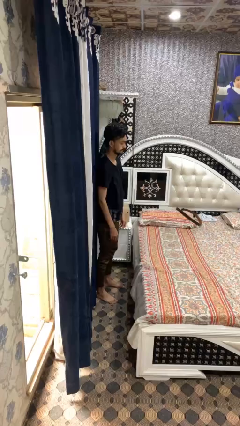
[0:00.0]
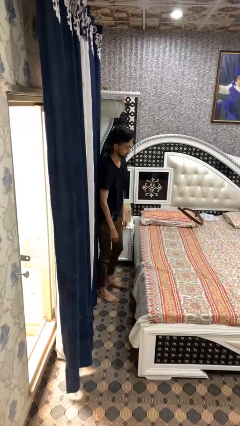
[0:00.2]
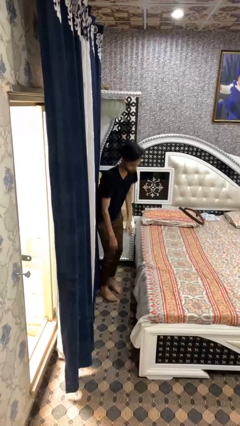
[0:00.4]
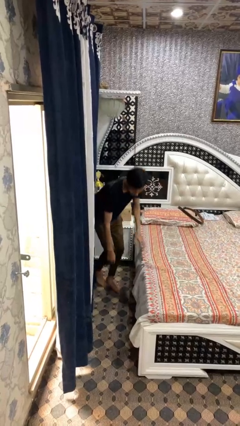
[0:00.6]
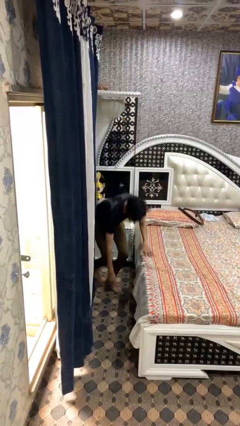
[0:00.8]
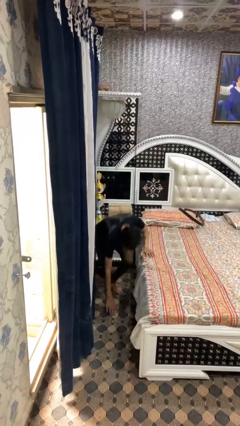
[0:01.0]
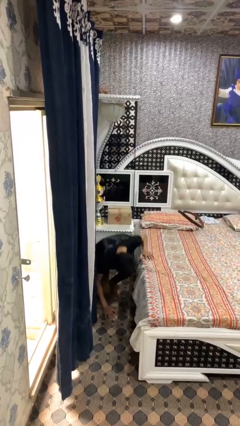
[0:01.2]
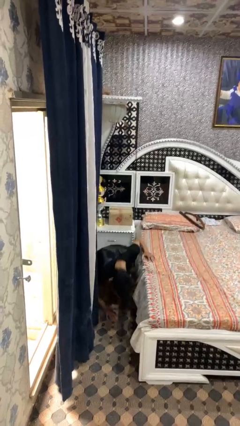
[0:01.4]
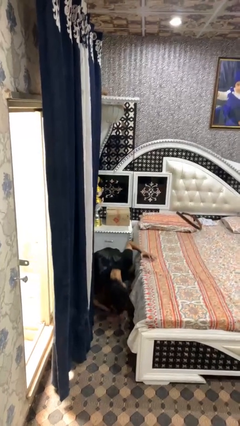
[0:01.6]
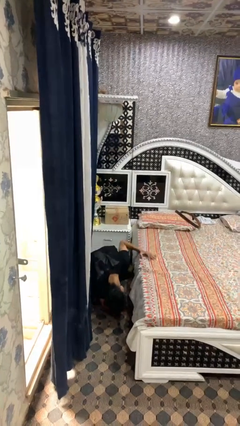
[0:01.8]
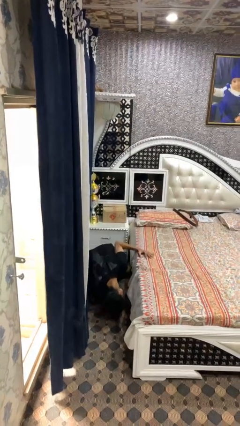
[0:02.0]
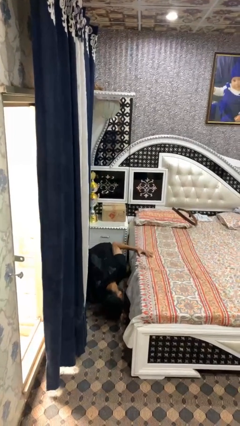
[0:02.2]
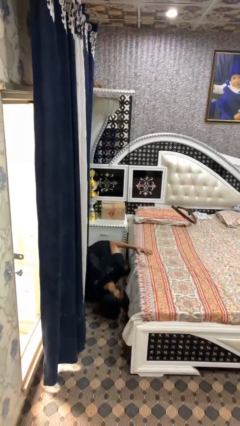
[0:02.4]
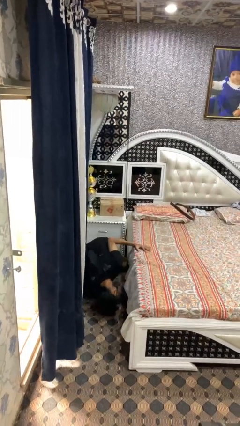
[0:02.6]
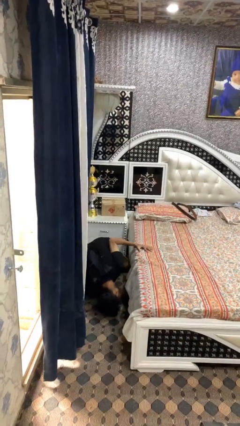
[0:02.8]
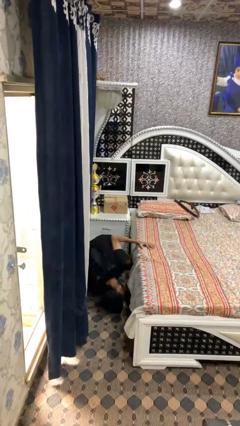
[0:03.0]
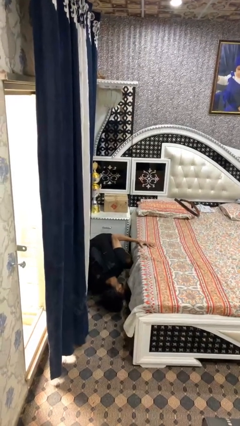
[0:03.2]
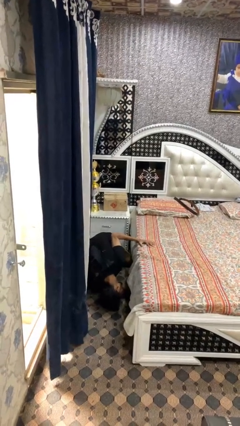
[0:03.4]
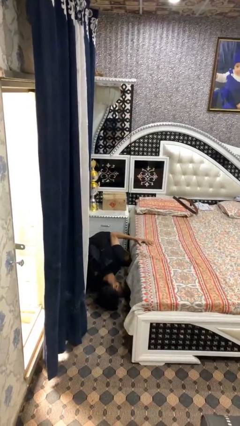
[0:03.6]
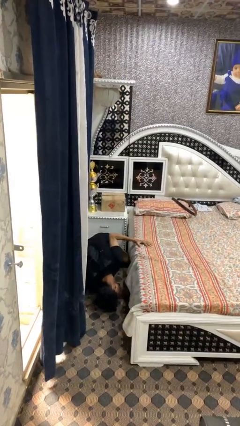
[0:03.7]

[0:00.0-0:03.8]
person searches under bed

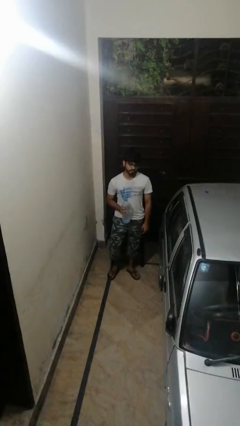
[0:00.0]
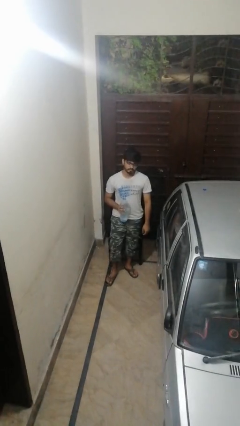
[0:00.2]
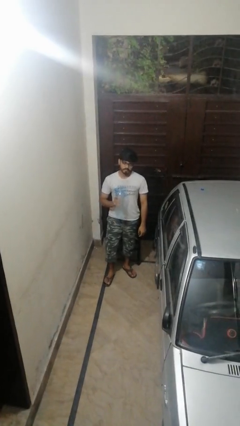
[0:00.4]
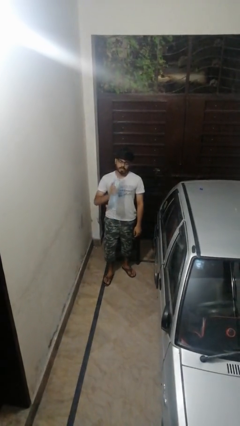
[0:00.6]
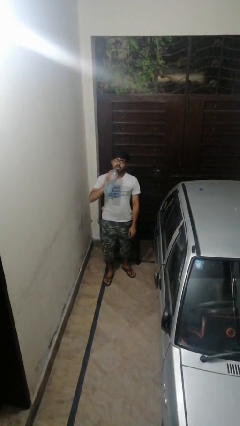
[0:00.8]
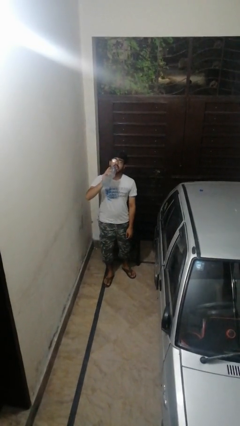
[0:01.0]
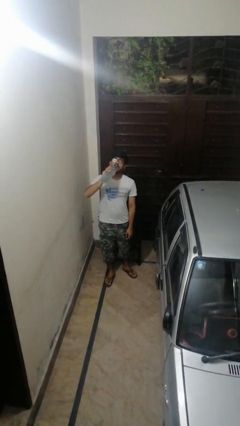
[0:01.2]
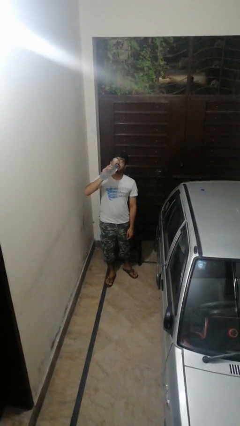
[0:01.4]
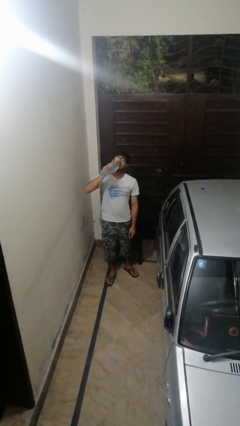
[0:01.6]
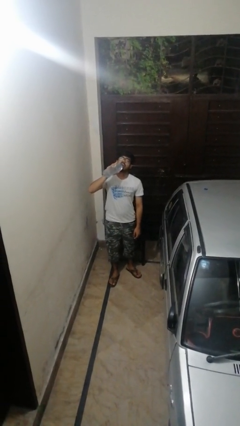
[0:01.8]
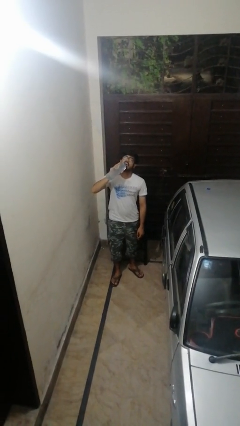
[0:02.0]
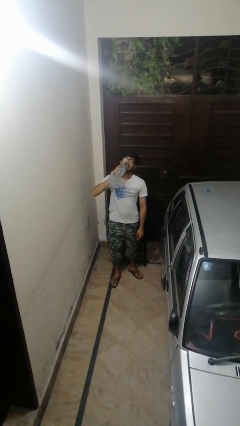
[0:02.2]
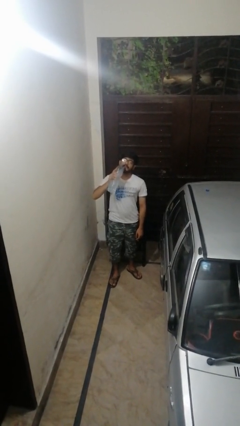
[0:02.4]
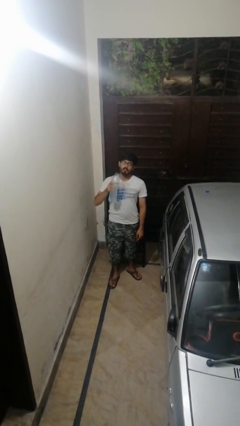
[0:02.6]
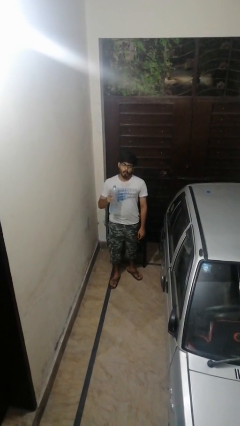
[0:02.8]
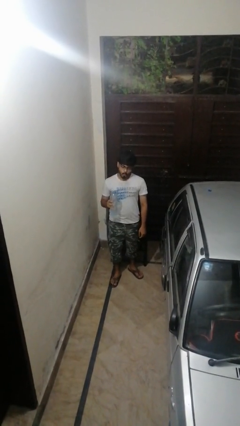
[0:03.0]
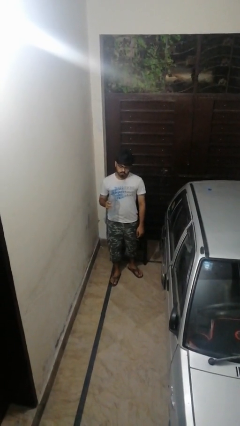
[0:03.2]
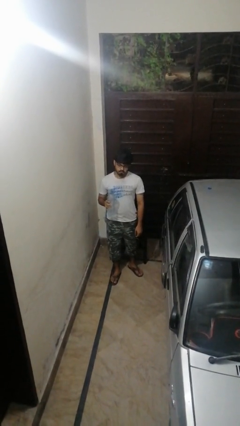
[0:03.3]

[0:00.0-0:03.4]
person drinks from bottle

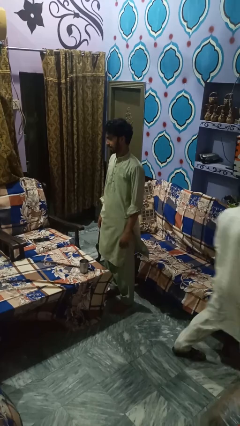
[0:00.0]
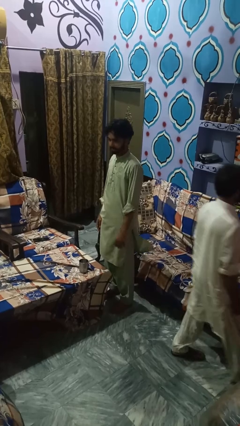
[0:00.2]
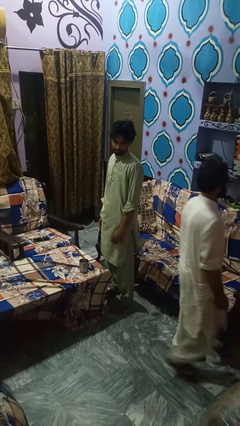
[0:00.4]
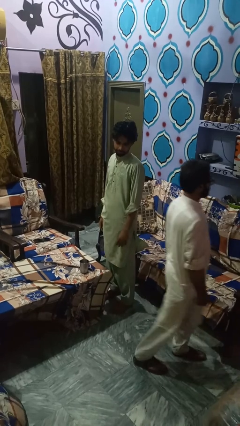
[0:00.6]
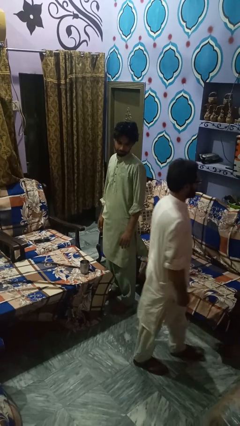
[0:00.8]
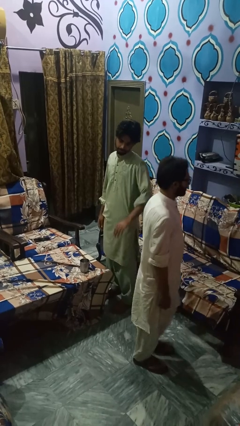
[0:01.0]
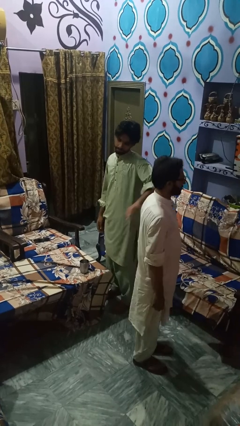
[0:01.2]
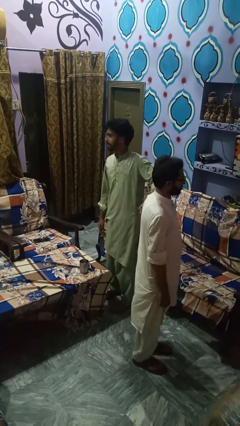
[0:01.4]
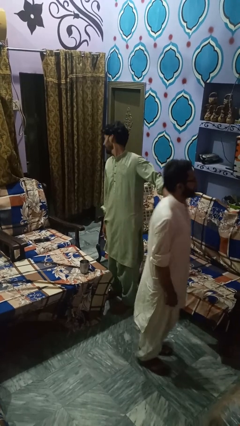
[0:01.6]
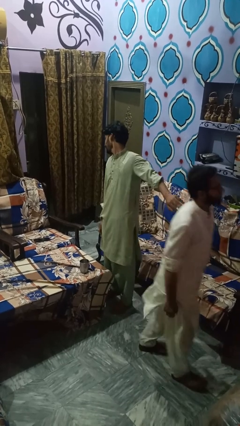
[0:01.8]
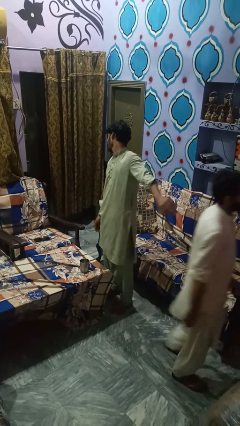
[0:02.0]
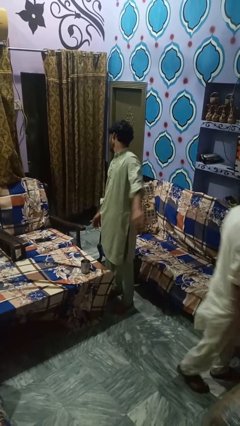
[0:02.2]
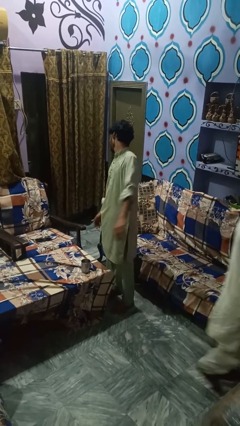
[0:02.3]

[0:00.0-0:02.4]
person shoves person

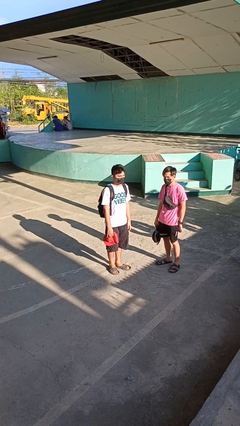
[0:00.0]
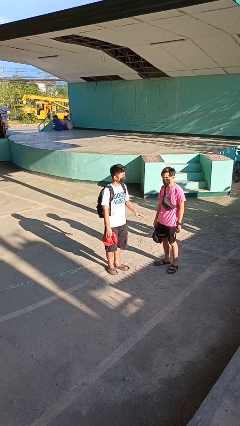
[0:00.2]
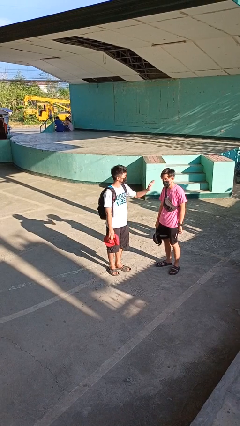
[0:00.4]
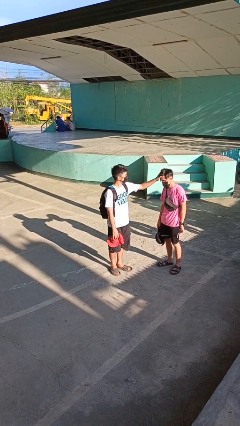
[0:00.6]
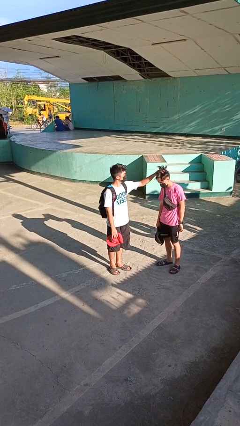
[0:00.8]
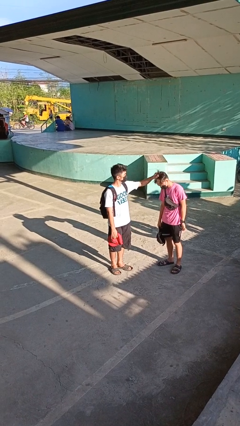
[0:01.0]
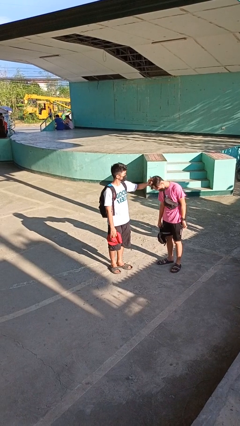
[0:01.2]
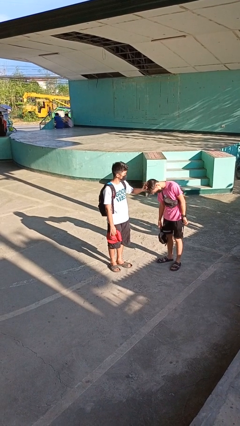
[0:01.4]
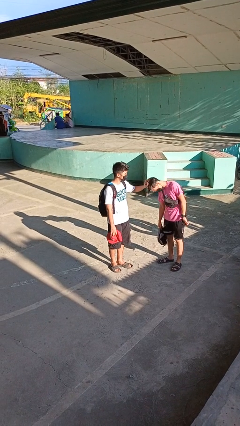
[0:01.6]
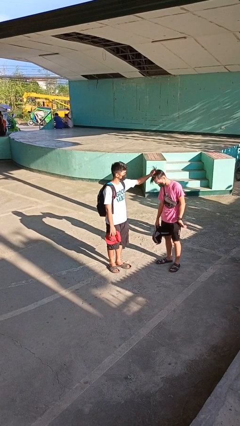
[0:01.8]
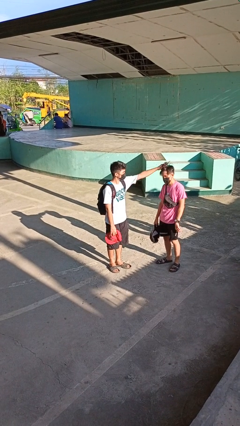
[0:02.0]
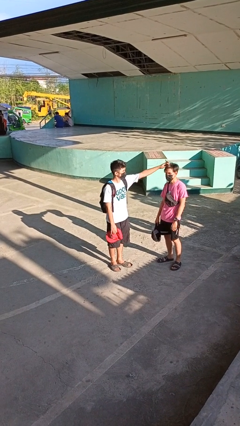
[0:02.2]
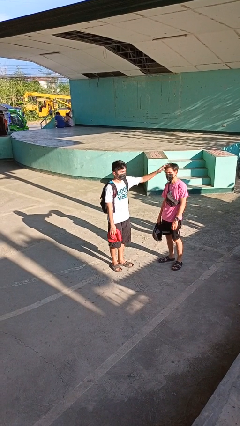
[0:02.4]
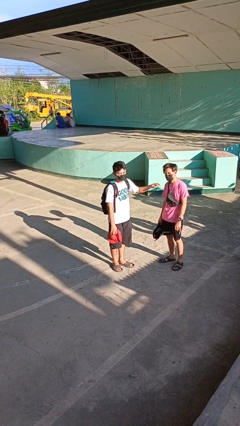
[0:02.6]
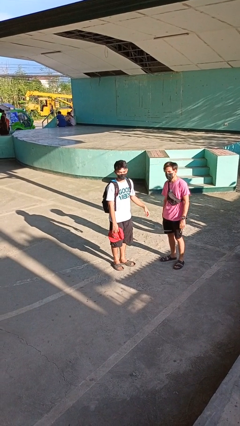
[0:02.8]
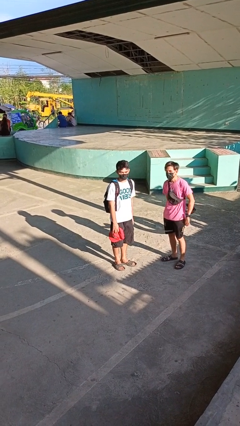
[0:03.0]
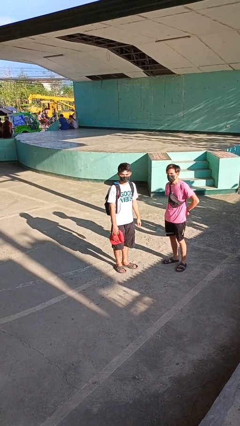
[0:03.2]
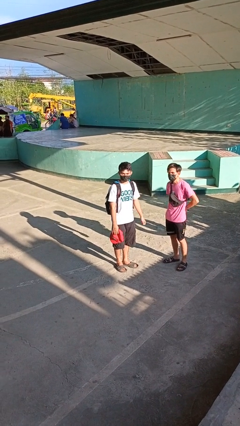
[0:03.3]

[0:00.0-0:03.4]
person grabs person by hair

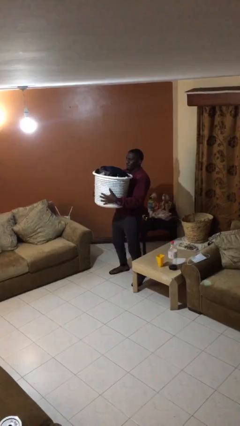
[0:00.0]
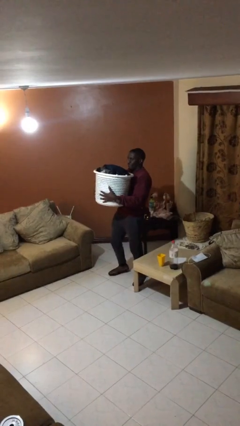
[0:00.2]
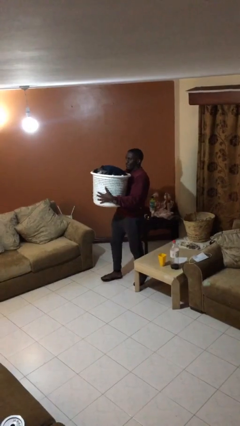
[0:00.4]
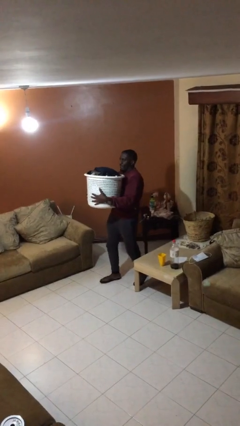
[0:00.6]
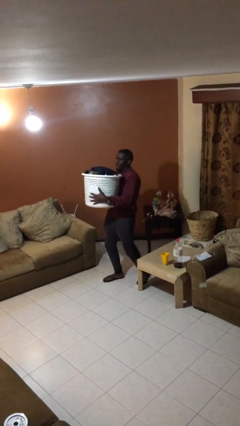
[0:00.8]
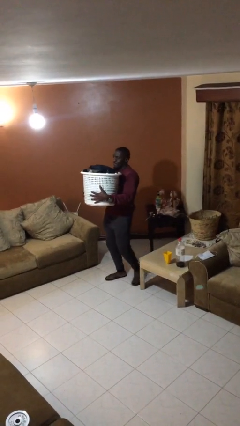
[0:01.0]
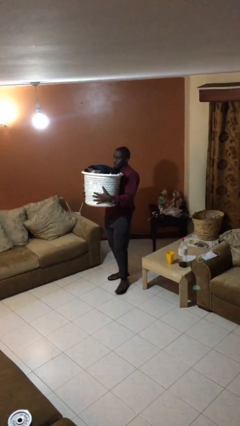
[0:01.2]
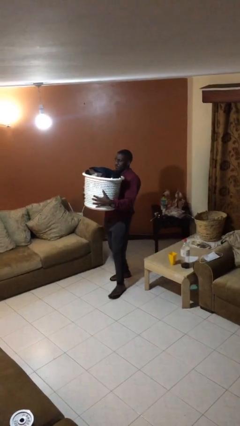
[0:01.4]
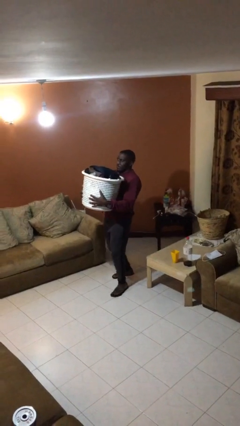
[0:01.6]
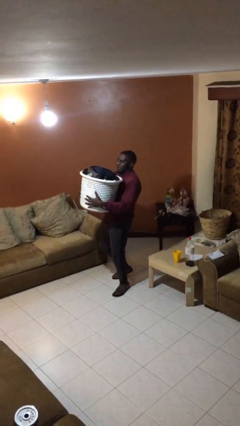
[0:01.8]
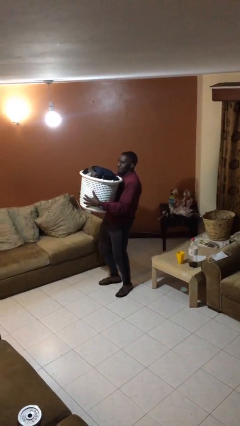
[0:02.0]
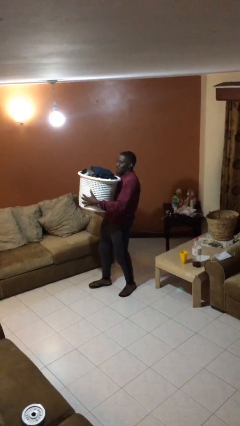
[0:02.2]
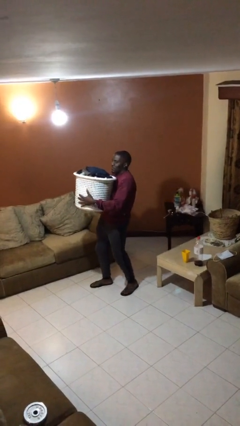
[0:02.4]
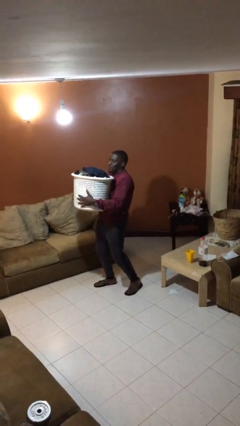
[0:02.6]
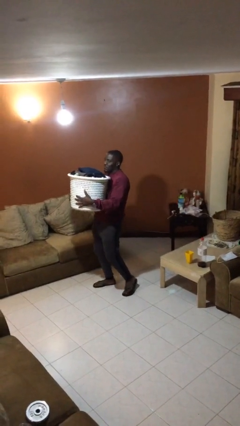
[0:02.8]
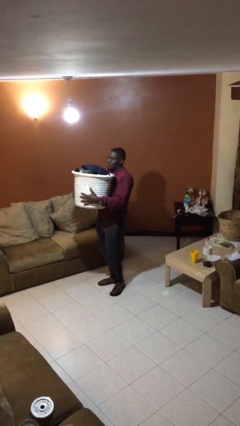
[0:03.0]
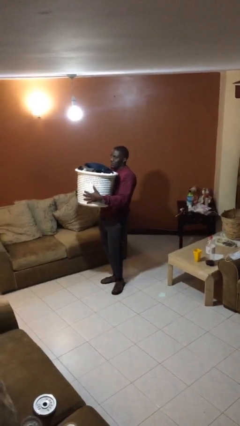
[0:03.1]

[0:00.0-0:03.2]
person carries laundry basket

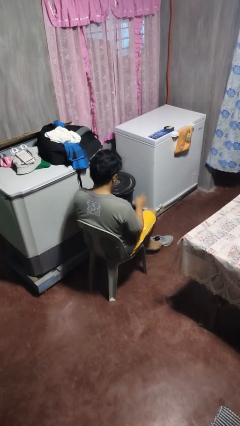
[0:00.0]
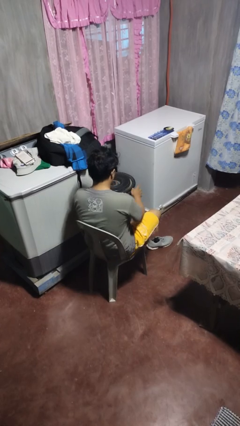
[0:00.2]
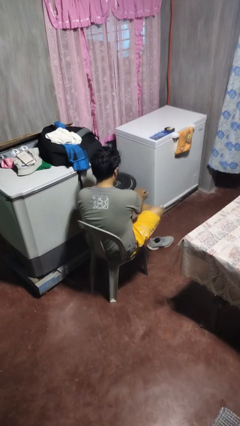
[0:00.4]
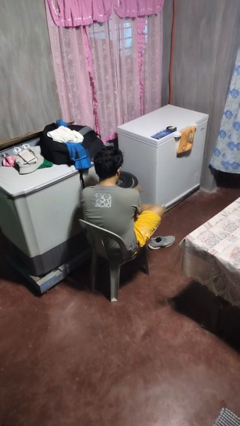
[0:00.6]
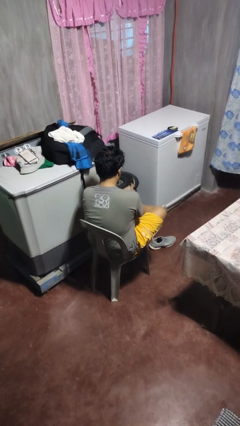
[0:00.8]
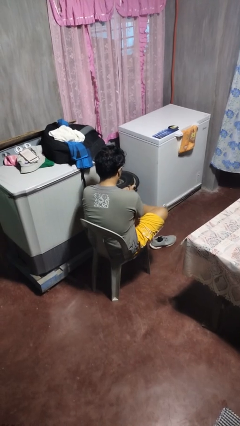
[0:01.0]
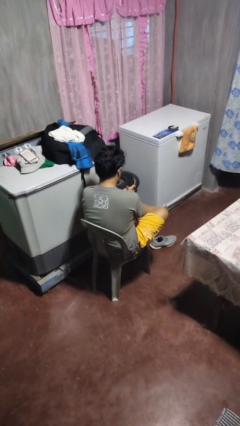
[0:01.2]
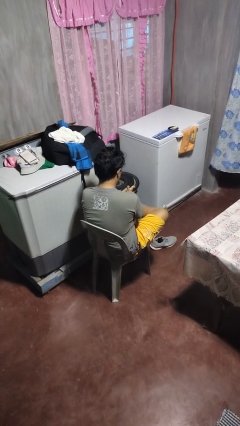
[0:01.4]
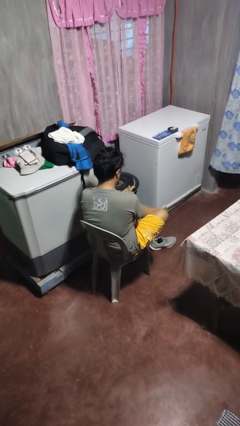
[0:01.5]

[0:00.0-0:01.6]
person rubs foot
